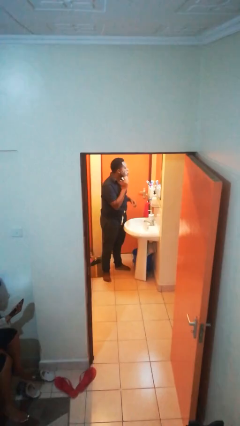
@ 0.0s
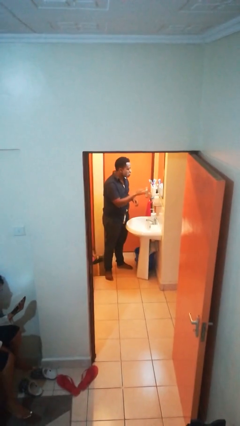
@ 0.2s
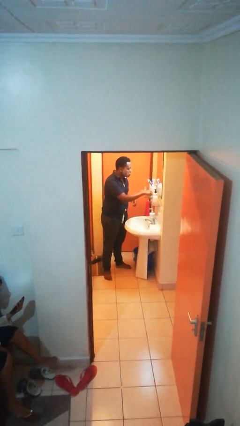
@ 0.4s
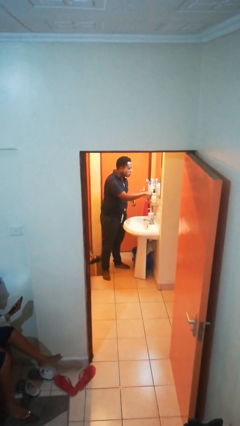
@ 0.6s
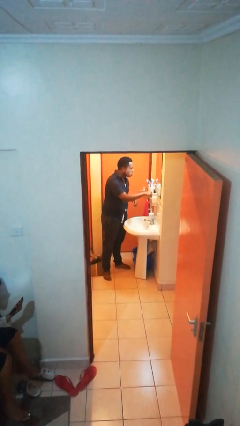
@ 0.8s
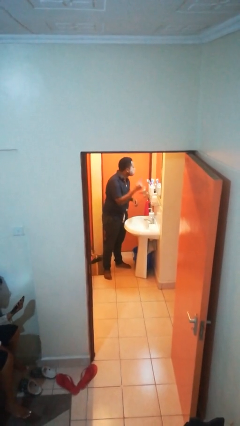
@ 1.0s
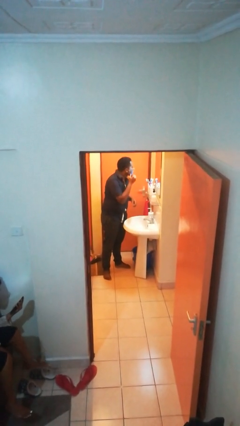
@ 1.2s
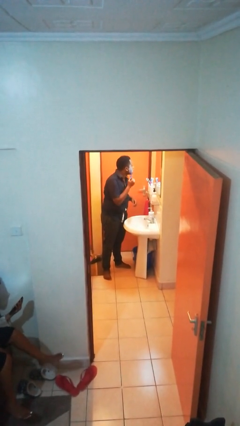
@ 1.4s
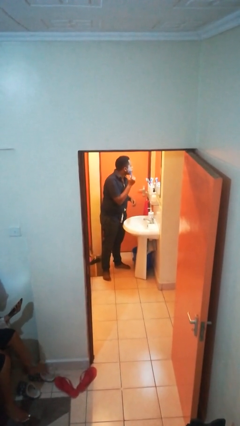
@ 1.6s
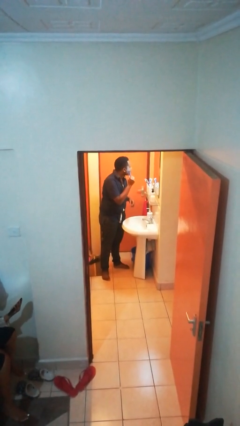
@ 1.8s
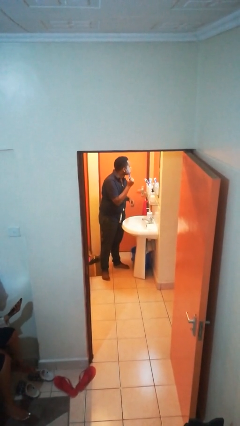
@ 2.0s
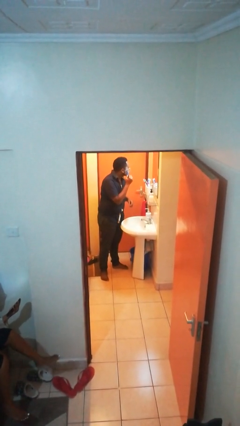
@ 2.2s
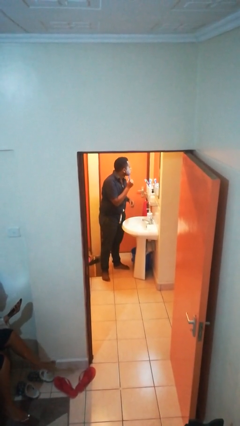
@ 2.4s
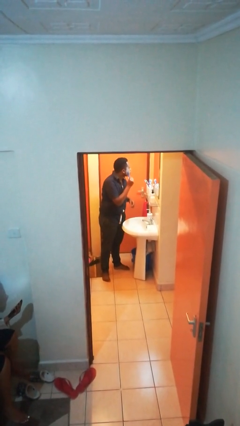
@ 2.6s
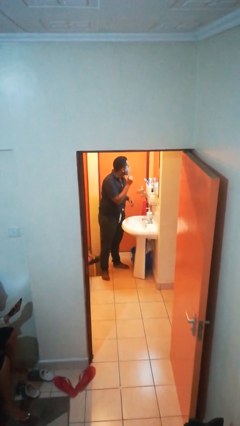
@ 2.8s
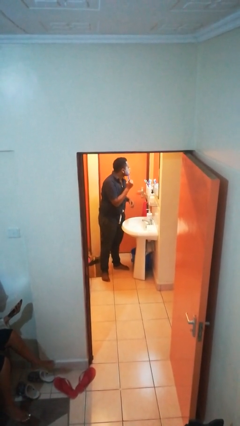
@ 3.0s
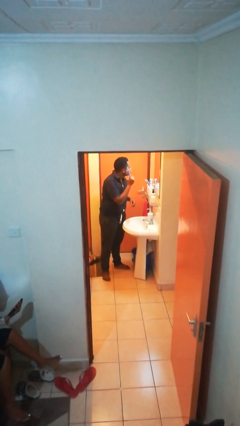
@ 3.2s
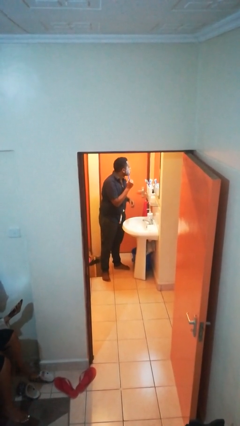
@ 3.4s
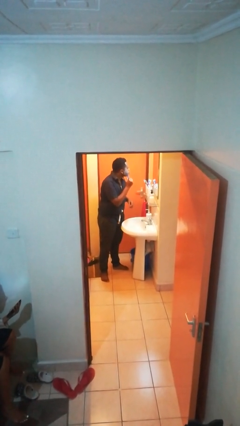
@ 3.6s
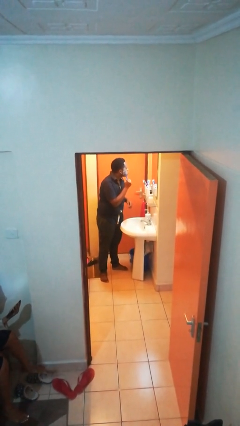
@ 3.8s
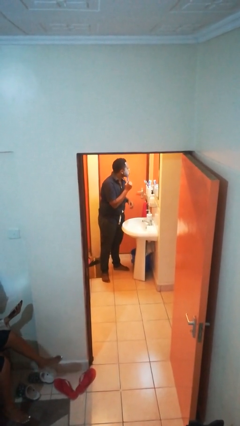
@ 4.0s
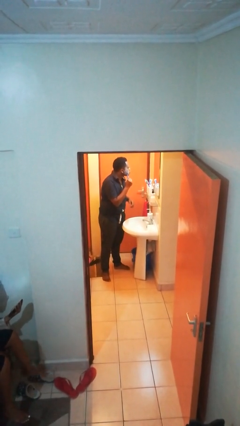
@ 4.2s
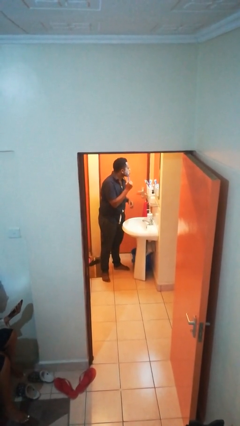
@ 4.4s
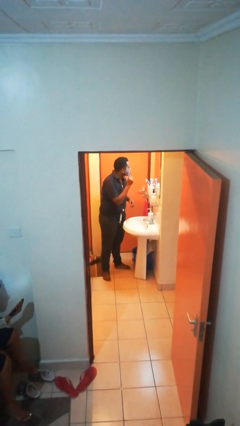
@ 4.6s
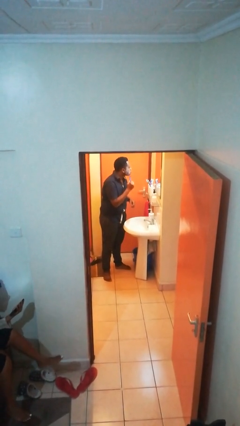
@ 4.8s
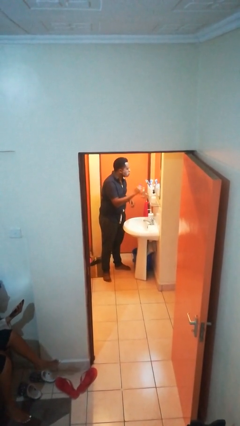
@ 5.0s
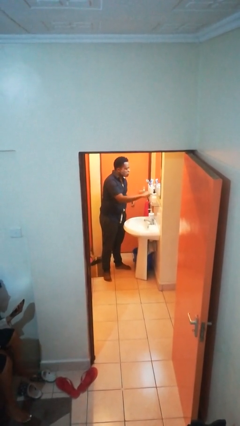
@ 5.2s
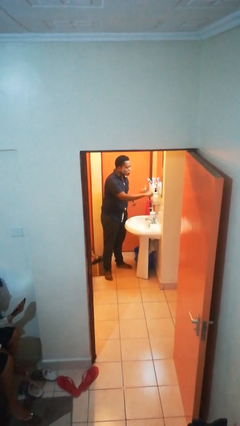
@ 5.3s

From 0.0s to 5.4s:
person shaves face

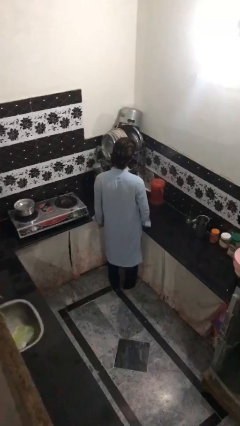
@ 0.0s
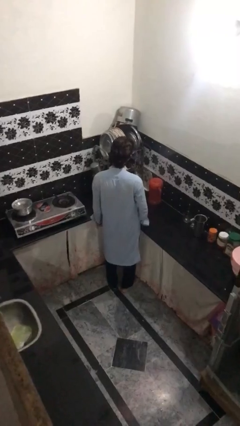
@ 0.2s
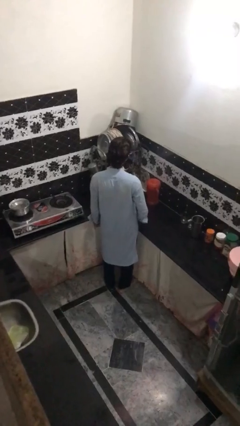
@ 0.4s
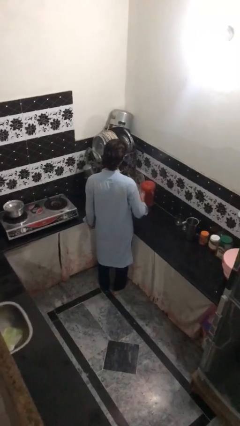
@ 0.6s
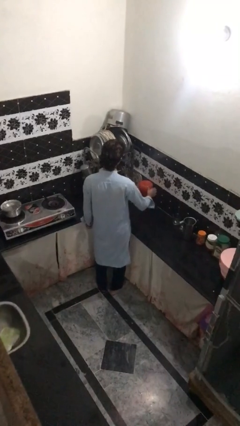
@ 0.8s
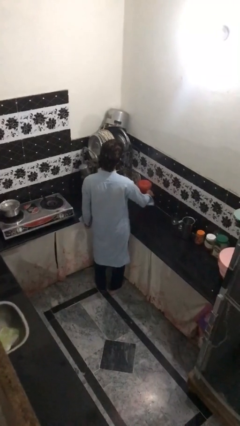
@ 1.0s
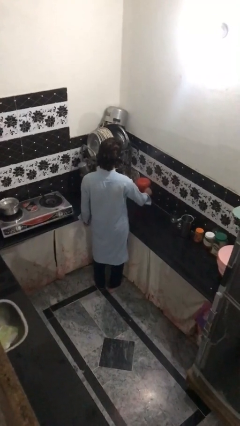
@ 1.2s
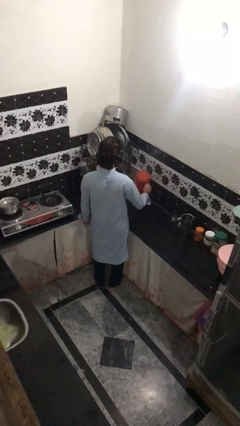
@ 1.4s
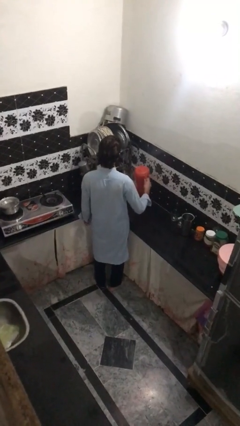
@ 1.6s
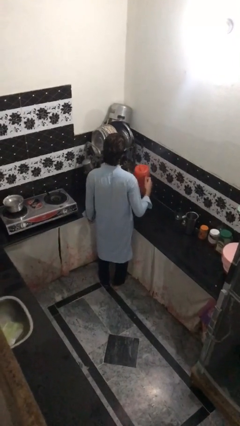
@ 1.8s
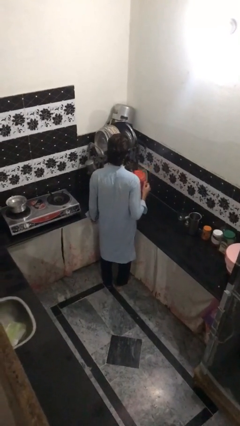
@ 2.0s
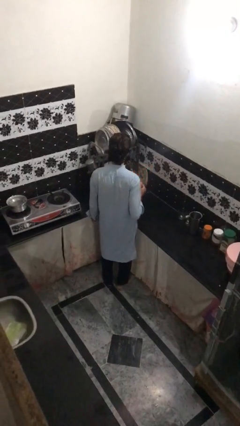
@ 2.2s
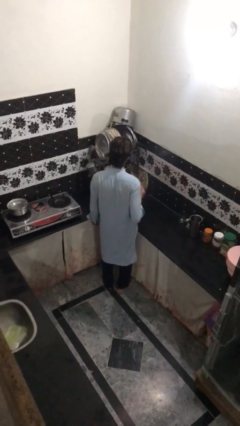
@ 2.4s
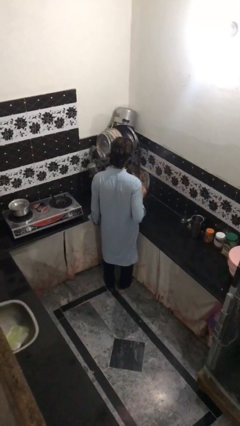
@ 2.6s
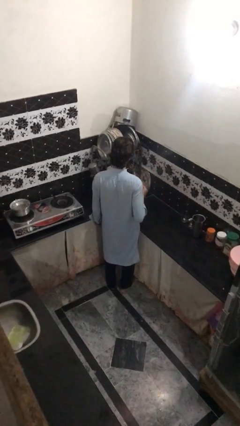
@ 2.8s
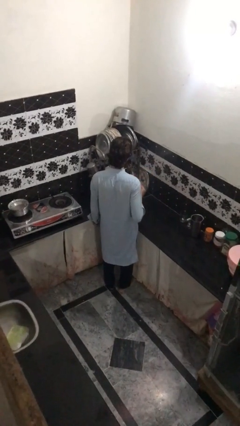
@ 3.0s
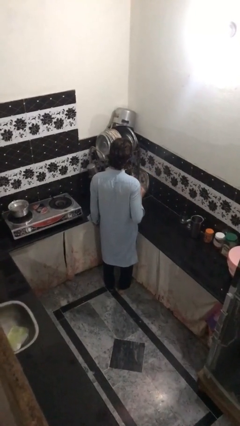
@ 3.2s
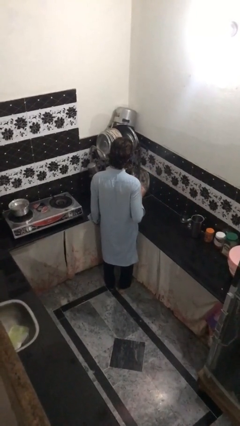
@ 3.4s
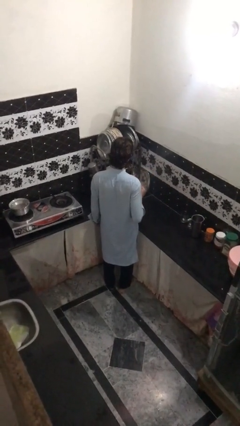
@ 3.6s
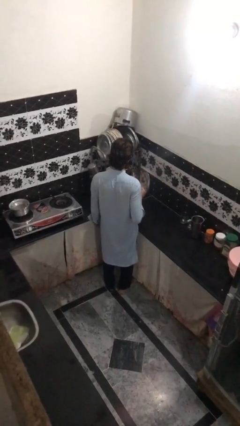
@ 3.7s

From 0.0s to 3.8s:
person picks up object from countertop

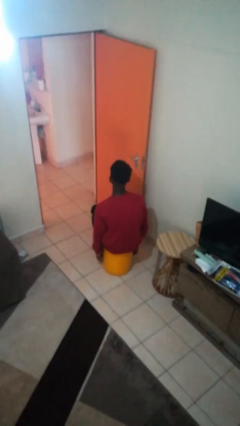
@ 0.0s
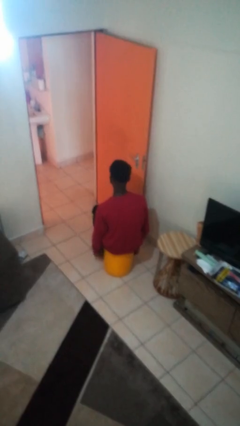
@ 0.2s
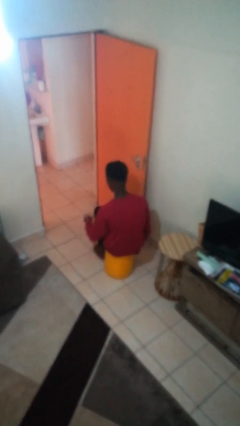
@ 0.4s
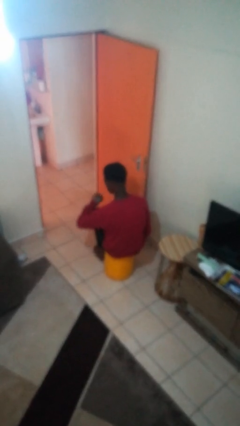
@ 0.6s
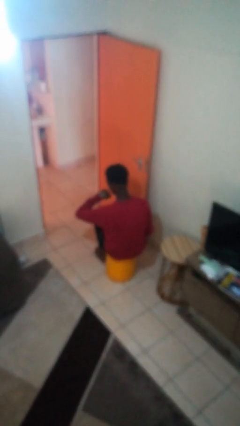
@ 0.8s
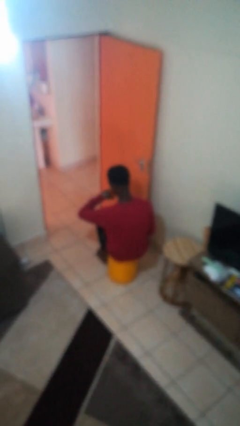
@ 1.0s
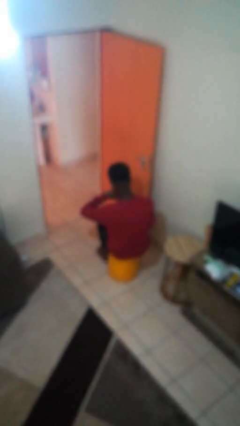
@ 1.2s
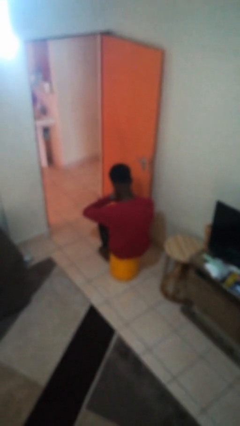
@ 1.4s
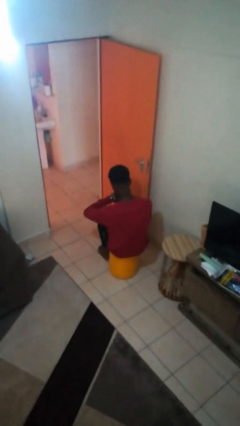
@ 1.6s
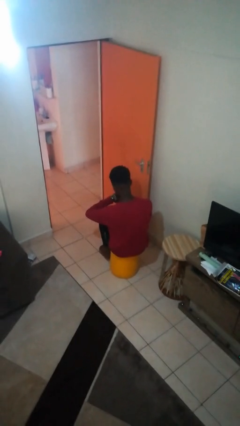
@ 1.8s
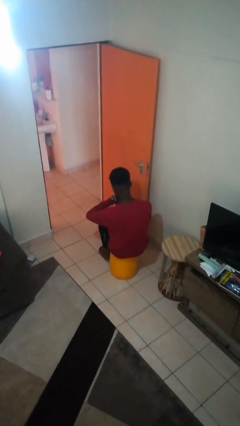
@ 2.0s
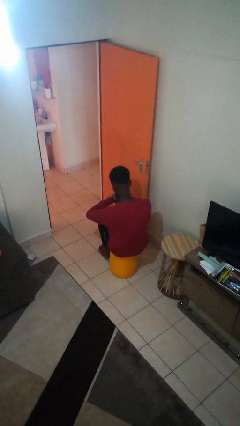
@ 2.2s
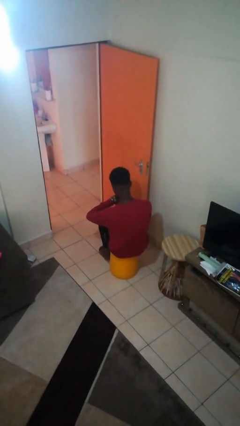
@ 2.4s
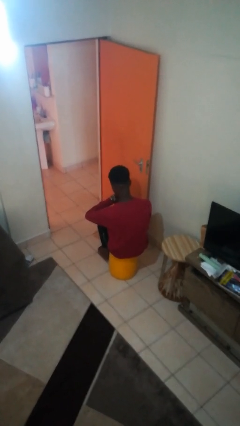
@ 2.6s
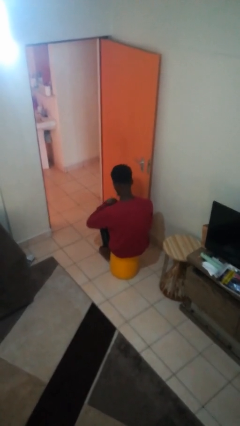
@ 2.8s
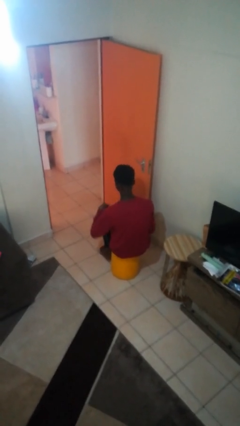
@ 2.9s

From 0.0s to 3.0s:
person looks at wristwatch

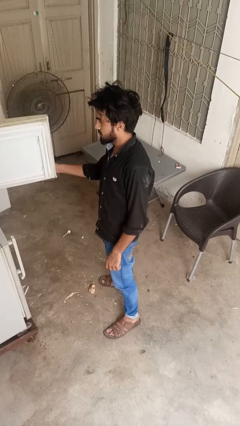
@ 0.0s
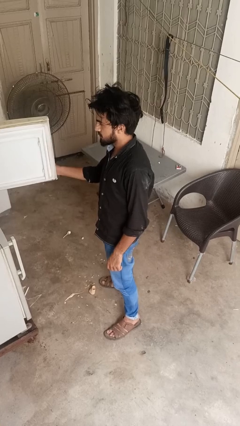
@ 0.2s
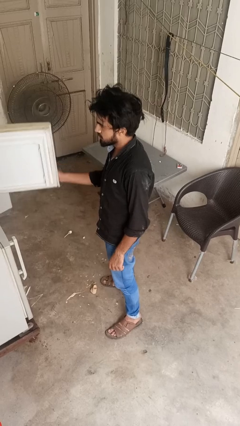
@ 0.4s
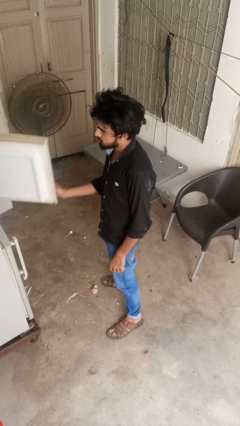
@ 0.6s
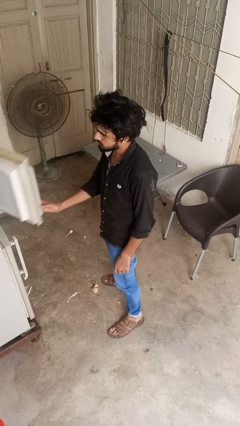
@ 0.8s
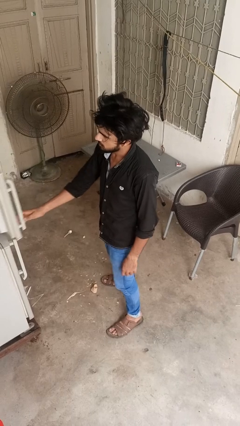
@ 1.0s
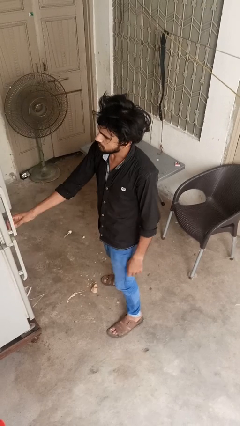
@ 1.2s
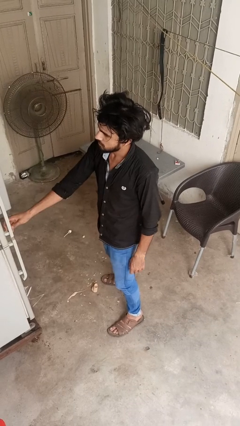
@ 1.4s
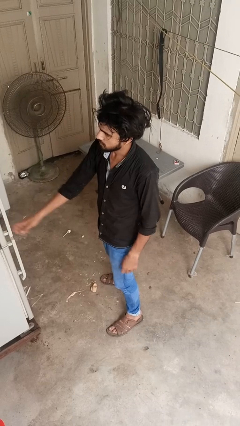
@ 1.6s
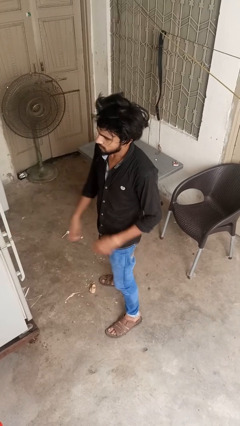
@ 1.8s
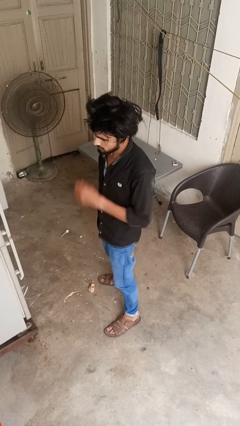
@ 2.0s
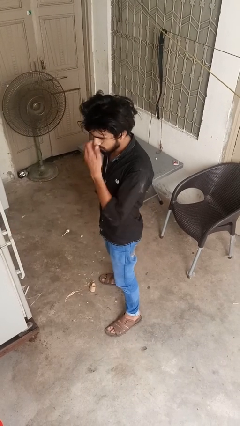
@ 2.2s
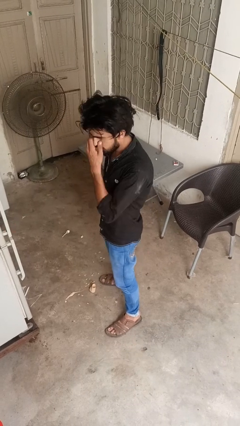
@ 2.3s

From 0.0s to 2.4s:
person closes refrigerator

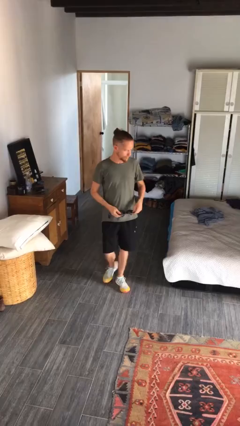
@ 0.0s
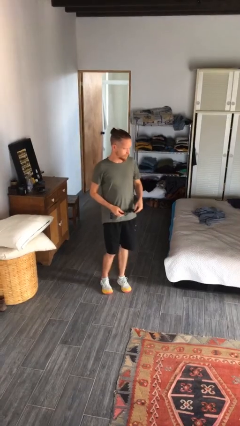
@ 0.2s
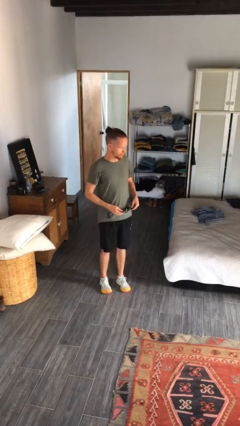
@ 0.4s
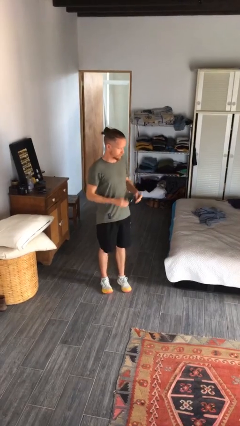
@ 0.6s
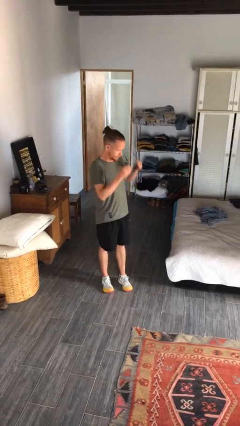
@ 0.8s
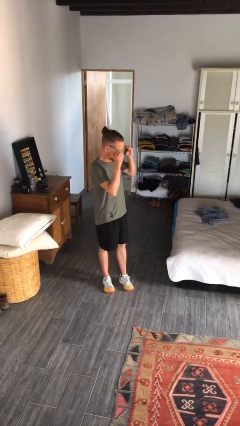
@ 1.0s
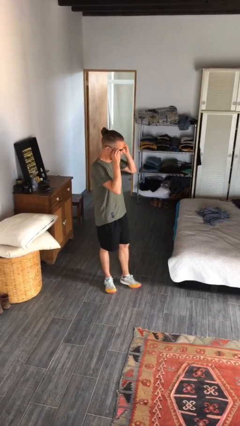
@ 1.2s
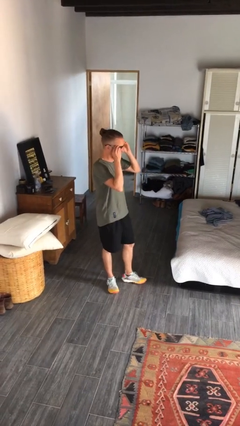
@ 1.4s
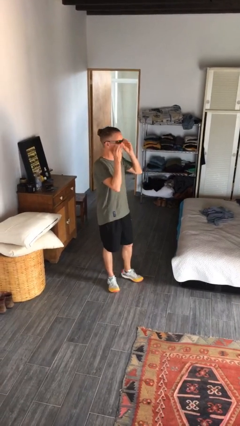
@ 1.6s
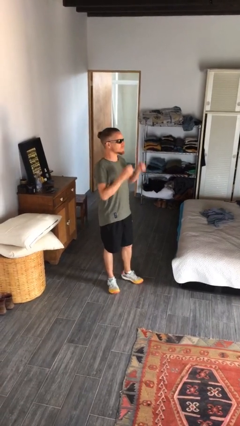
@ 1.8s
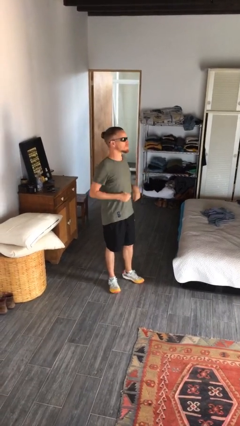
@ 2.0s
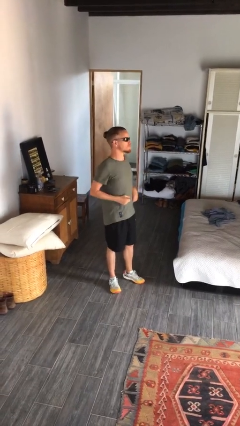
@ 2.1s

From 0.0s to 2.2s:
person puts on sunglasses

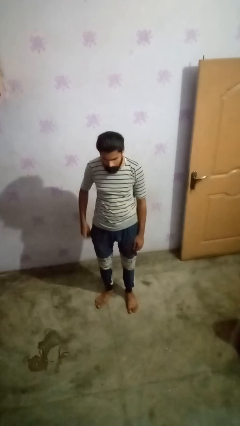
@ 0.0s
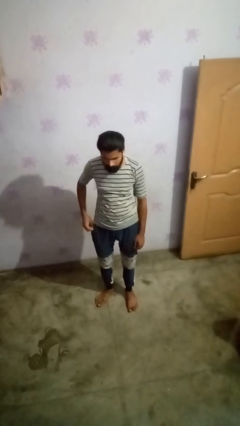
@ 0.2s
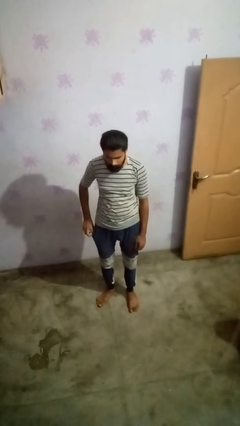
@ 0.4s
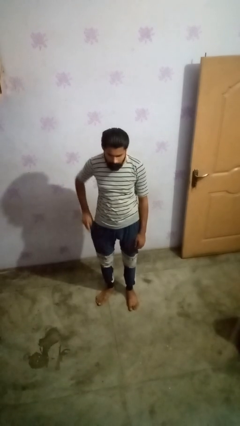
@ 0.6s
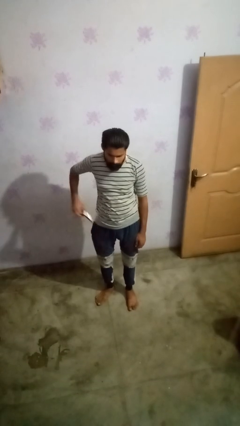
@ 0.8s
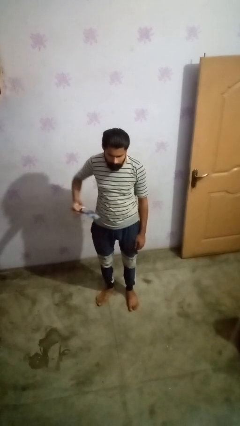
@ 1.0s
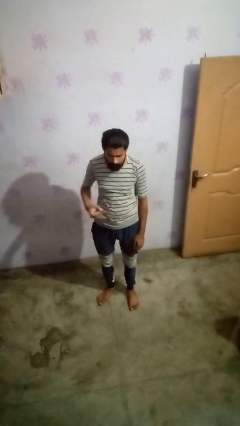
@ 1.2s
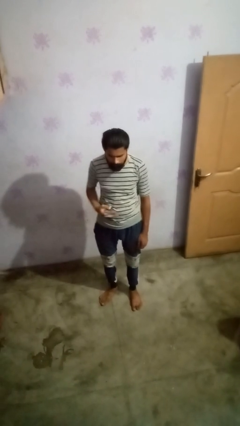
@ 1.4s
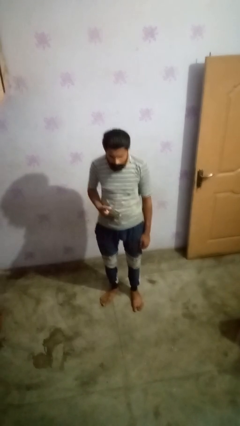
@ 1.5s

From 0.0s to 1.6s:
person takes phone from pocket
